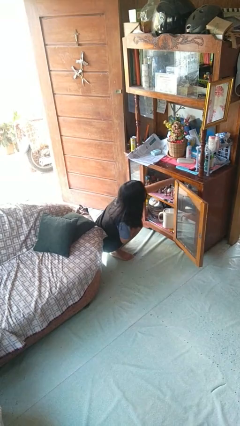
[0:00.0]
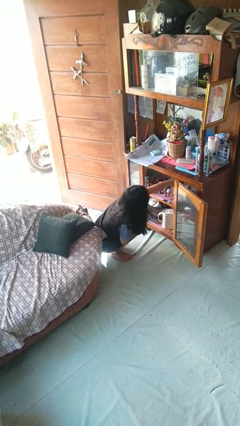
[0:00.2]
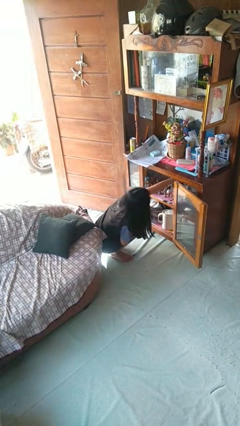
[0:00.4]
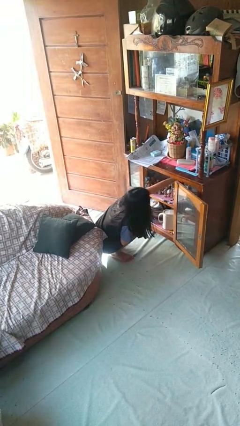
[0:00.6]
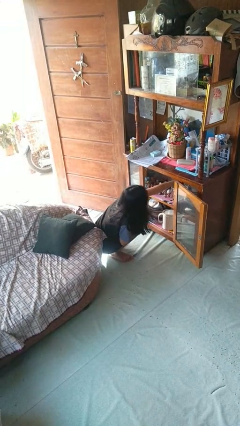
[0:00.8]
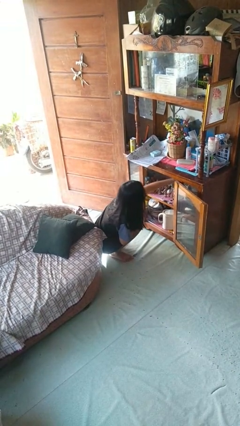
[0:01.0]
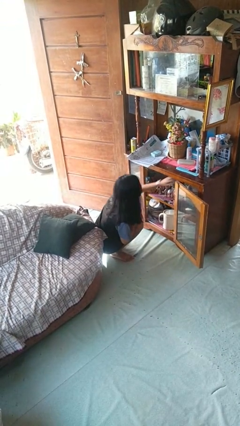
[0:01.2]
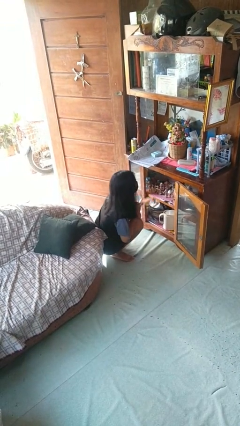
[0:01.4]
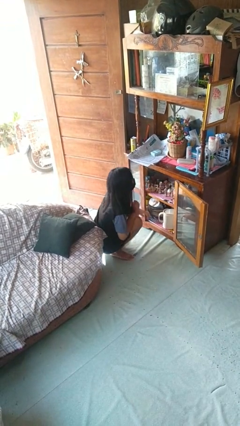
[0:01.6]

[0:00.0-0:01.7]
person searches in cabinet

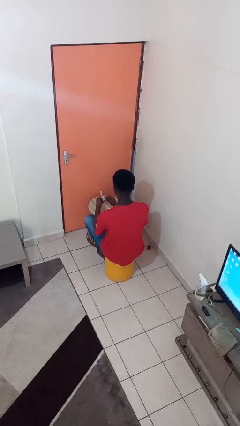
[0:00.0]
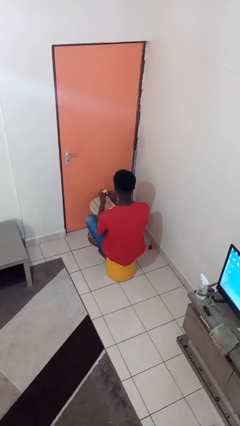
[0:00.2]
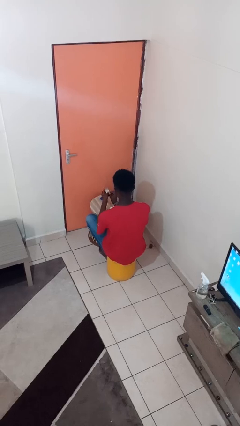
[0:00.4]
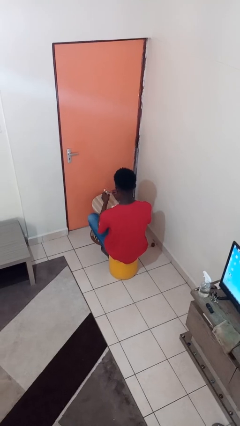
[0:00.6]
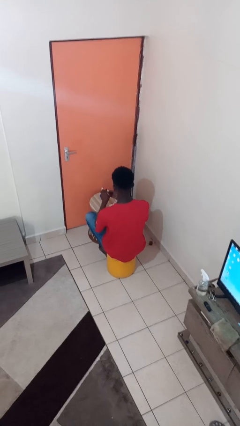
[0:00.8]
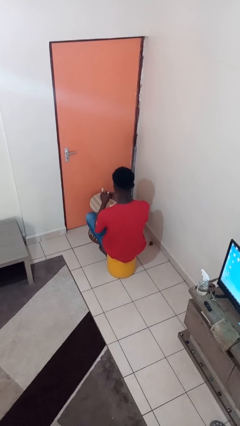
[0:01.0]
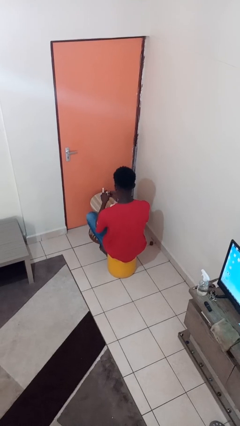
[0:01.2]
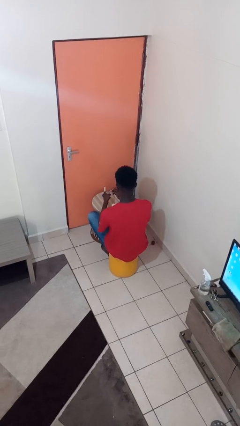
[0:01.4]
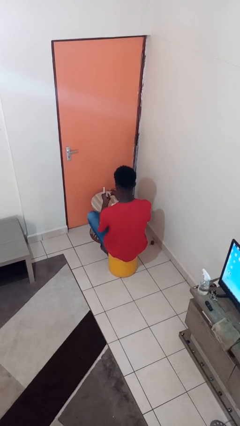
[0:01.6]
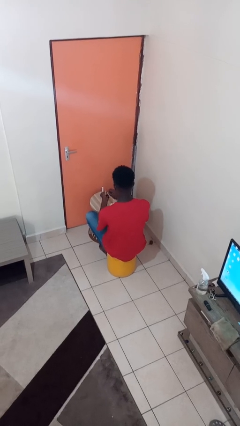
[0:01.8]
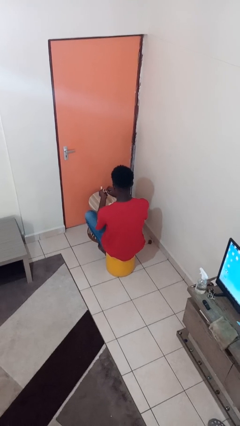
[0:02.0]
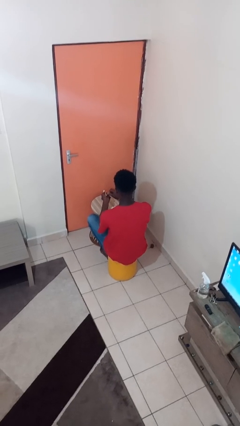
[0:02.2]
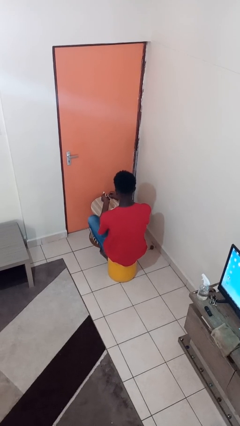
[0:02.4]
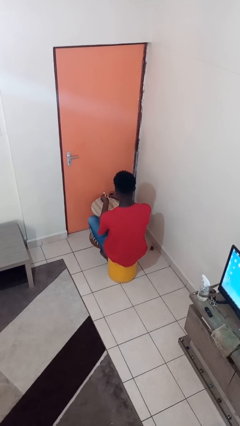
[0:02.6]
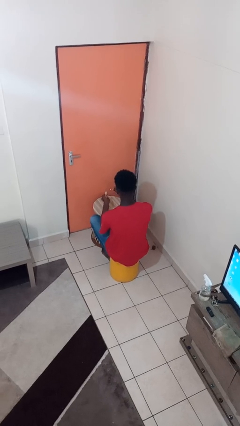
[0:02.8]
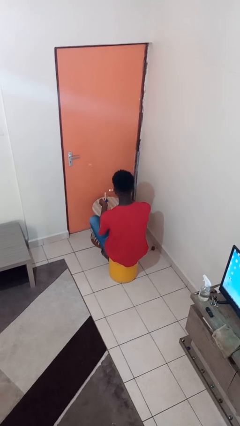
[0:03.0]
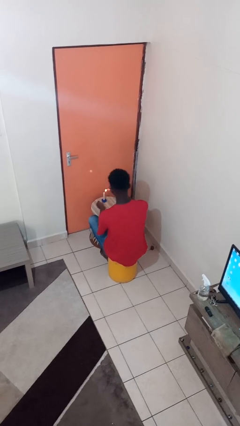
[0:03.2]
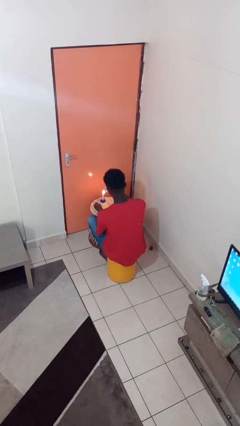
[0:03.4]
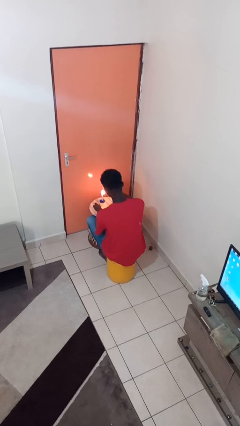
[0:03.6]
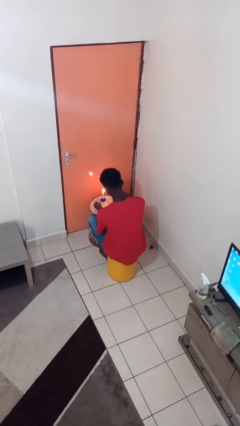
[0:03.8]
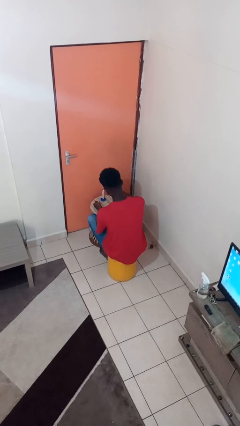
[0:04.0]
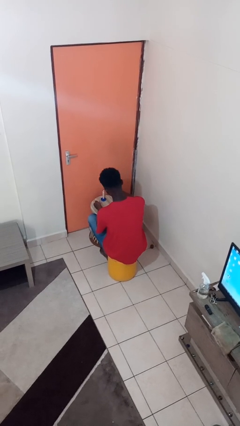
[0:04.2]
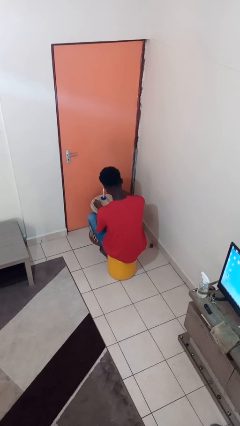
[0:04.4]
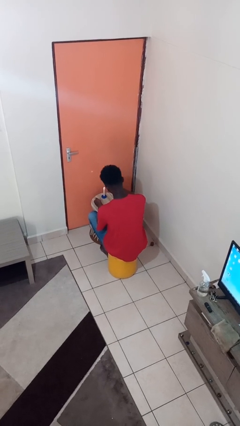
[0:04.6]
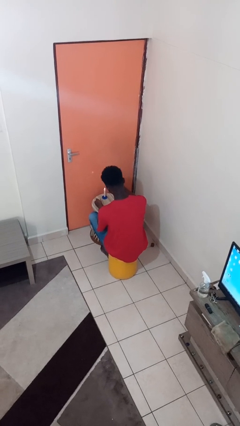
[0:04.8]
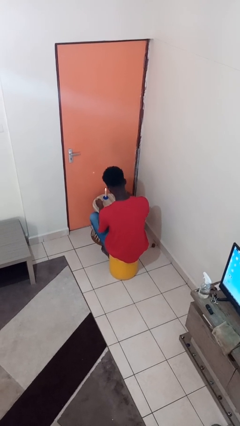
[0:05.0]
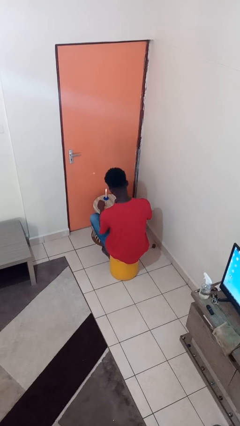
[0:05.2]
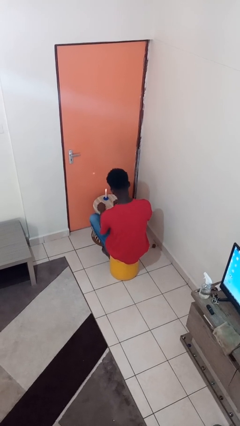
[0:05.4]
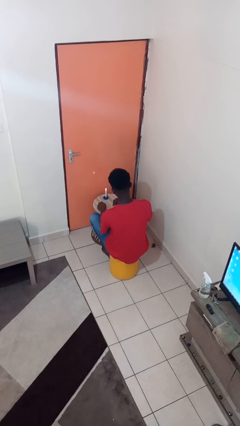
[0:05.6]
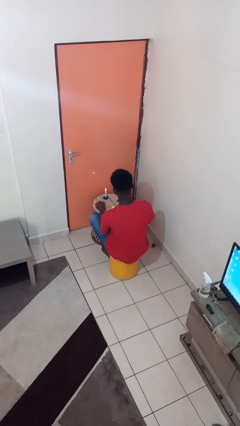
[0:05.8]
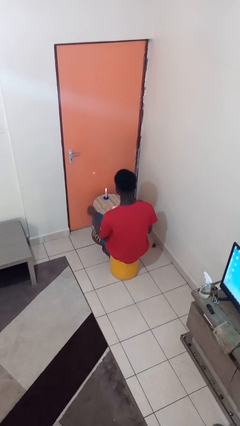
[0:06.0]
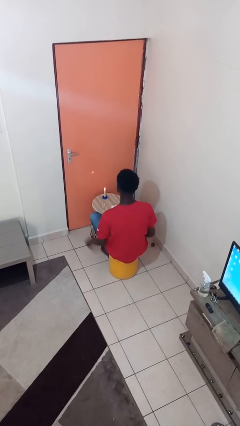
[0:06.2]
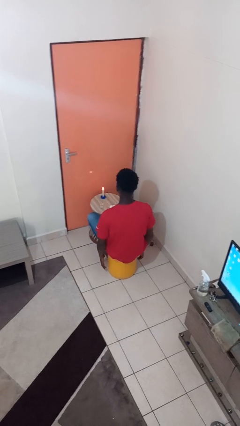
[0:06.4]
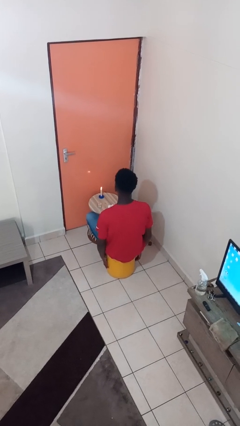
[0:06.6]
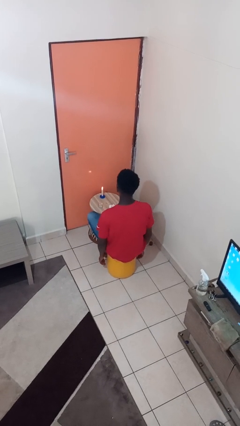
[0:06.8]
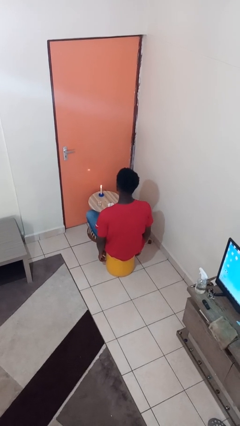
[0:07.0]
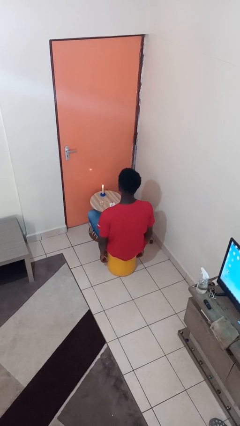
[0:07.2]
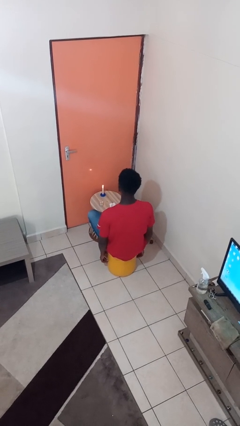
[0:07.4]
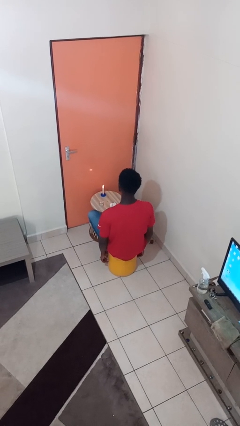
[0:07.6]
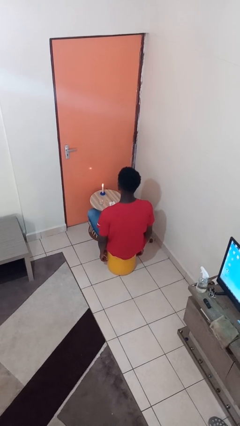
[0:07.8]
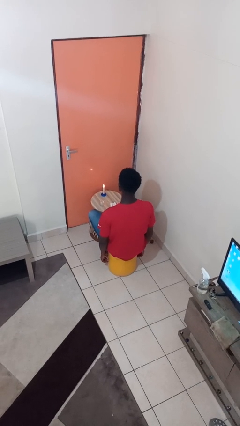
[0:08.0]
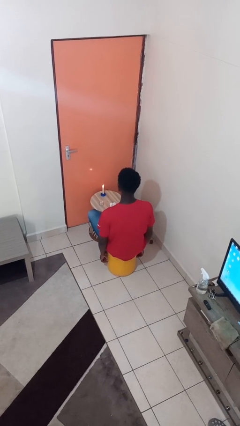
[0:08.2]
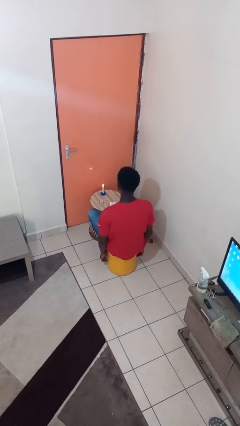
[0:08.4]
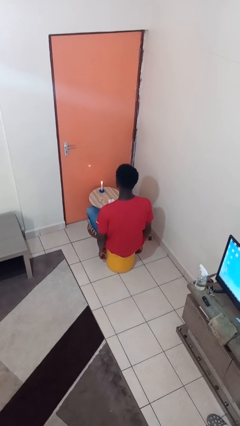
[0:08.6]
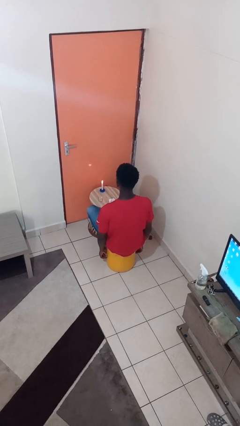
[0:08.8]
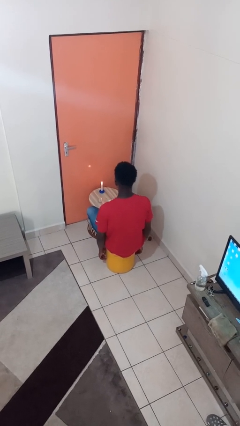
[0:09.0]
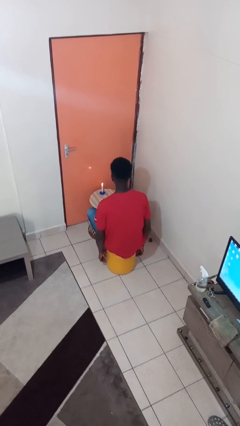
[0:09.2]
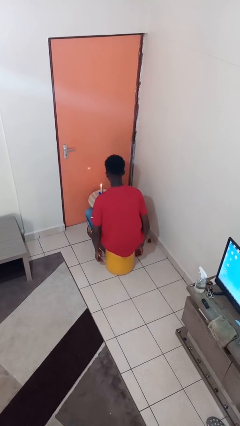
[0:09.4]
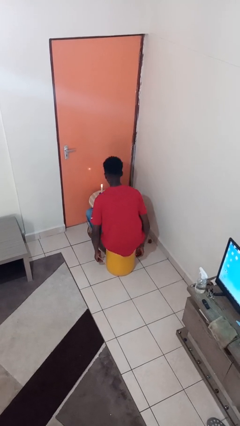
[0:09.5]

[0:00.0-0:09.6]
person lights candle

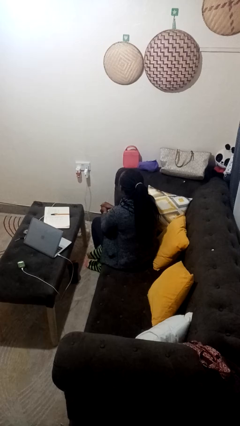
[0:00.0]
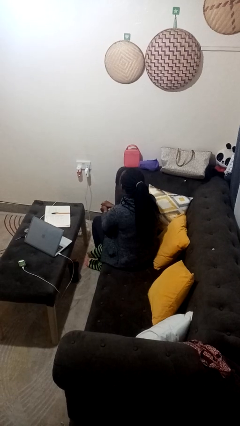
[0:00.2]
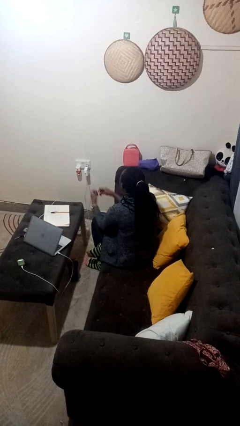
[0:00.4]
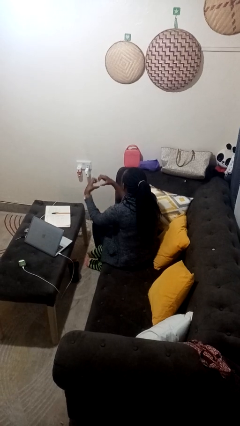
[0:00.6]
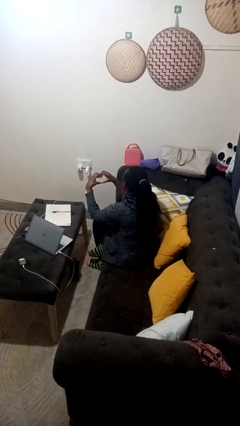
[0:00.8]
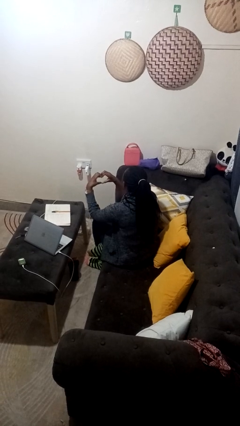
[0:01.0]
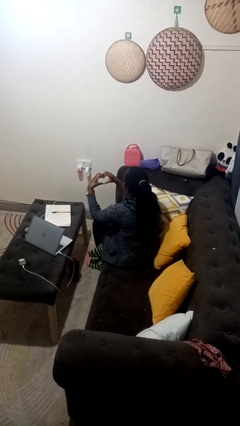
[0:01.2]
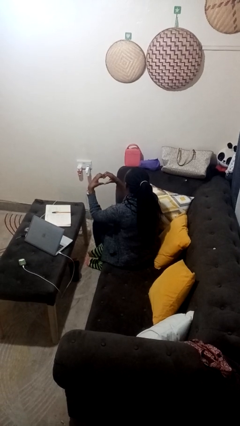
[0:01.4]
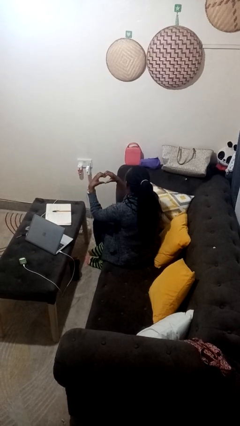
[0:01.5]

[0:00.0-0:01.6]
person gestures heart

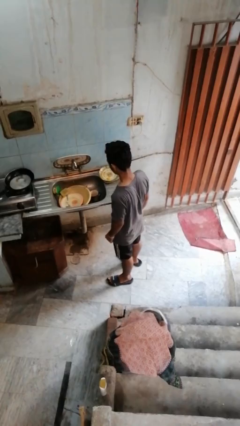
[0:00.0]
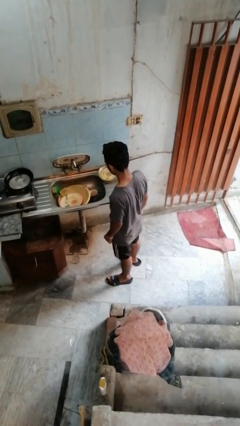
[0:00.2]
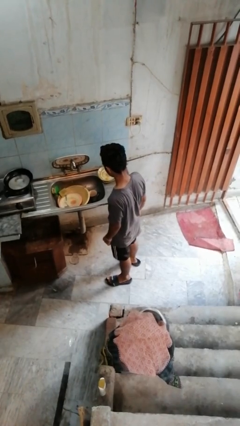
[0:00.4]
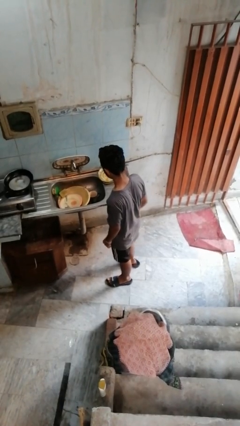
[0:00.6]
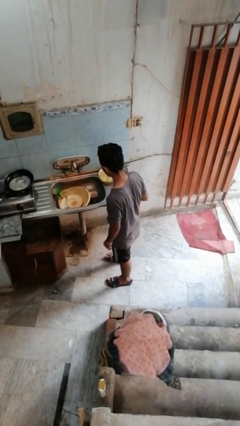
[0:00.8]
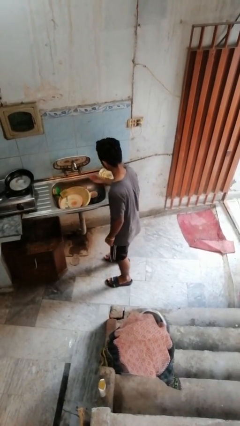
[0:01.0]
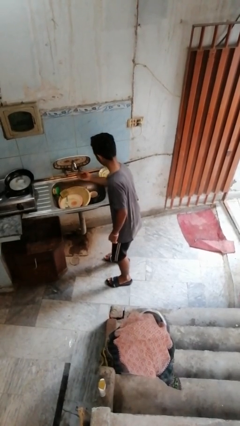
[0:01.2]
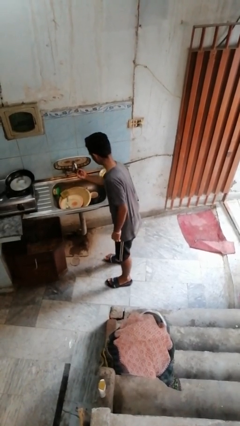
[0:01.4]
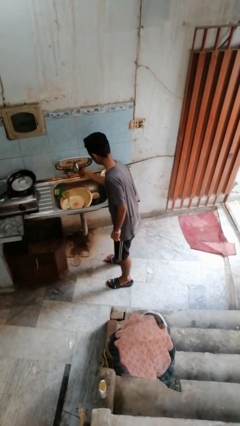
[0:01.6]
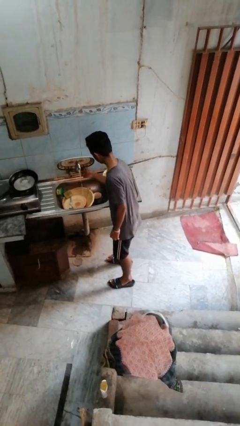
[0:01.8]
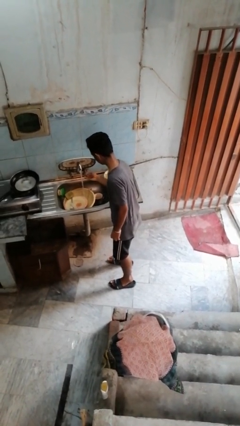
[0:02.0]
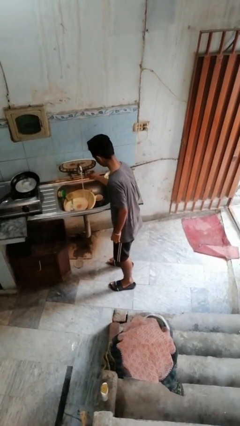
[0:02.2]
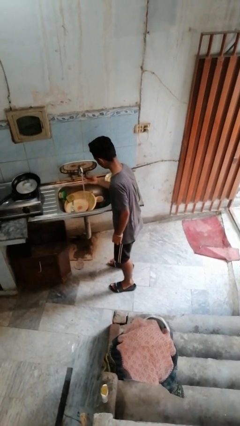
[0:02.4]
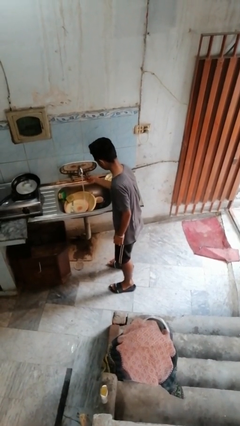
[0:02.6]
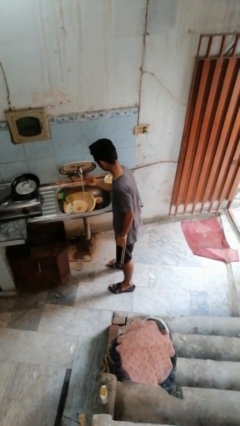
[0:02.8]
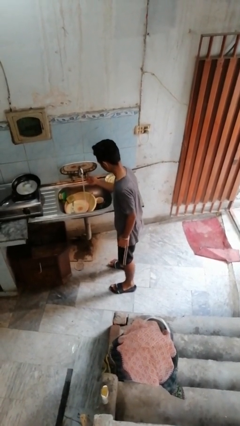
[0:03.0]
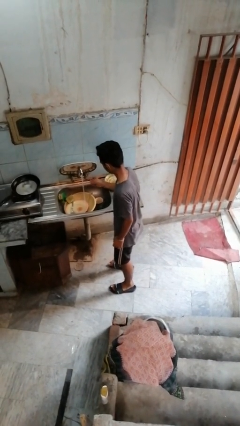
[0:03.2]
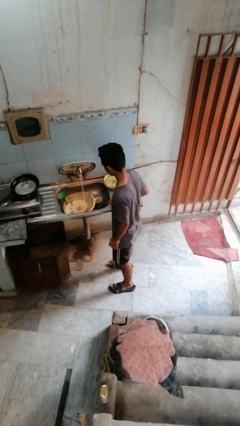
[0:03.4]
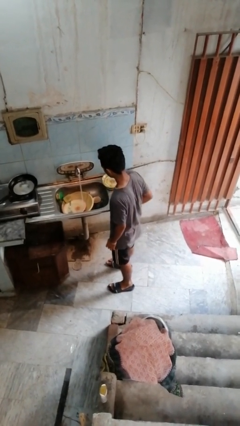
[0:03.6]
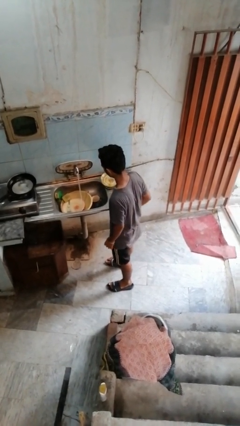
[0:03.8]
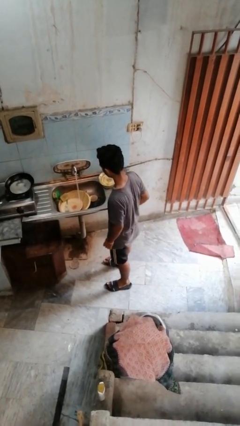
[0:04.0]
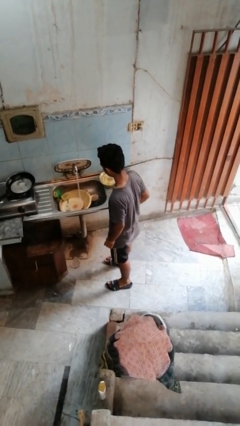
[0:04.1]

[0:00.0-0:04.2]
person turns on faucet

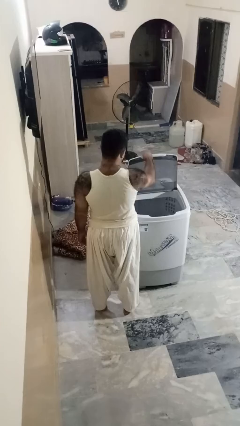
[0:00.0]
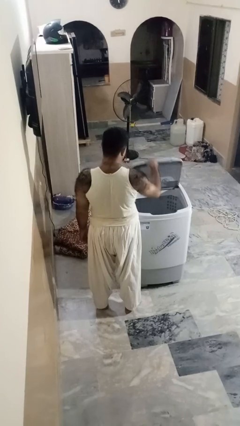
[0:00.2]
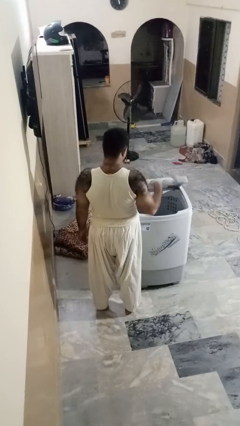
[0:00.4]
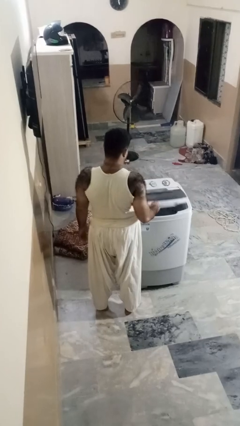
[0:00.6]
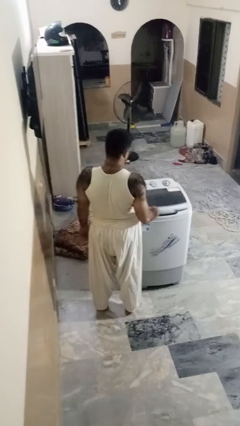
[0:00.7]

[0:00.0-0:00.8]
person closes clothes washer
